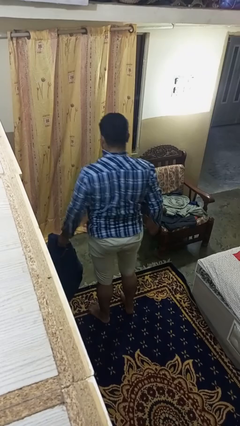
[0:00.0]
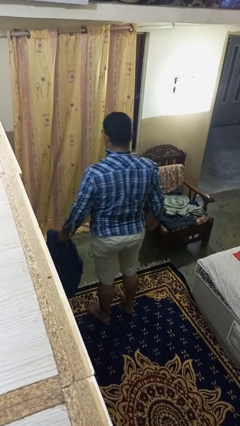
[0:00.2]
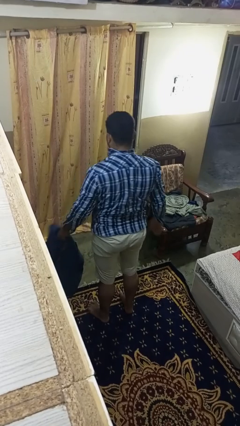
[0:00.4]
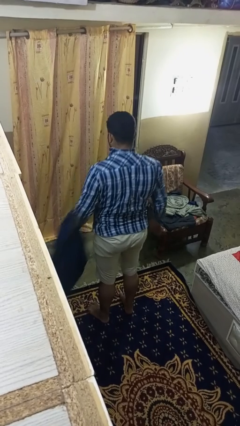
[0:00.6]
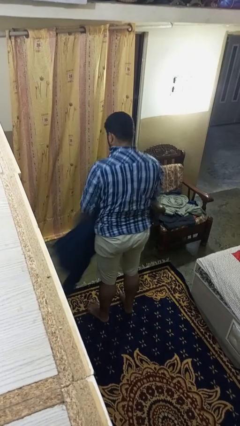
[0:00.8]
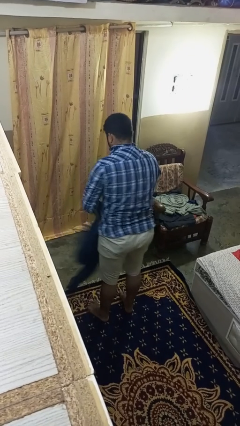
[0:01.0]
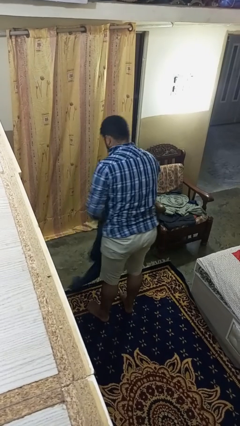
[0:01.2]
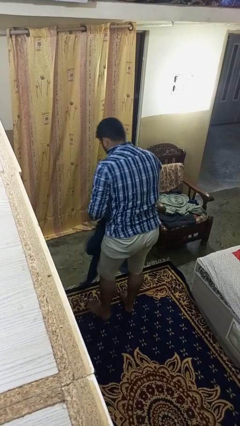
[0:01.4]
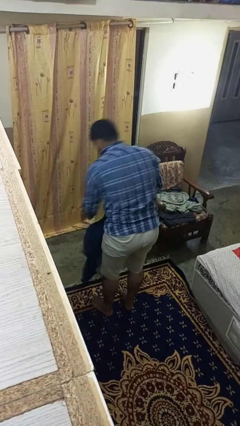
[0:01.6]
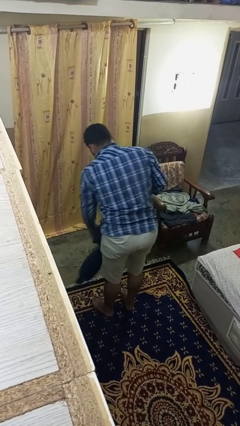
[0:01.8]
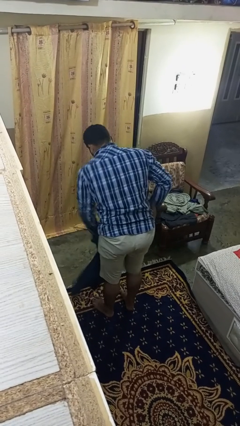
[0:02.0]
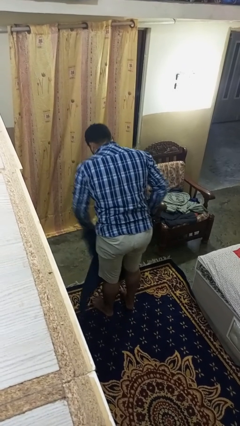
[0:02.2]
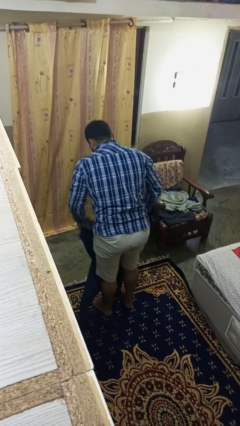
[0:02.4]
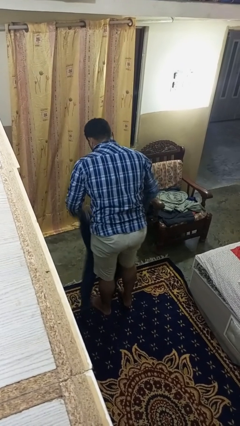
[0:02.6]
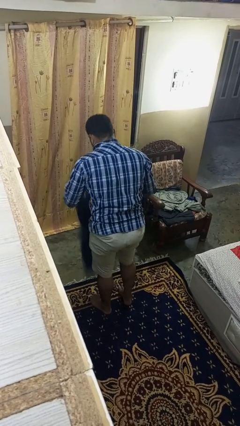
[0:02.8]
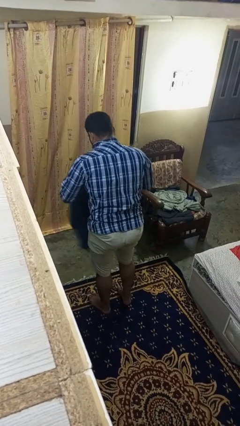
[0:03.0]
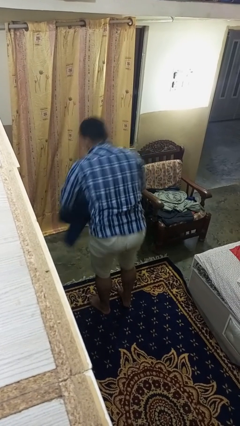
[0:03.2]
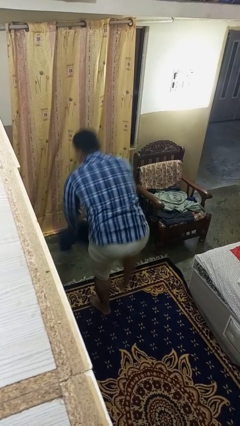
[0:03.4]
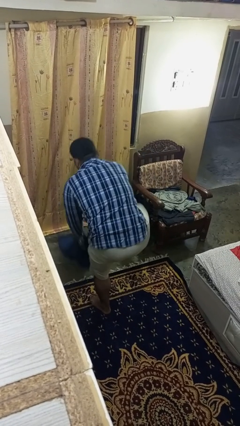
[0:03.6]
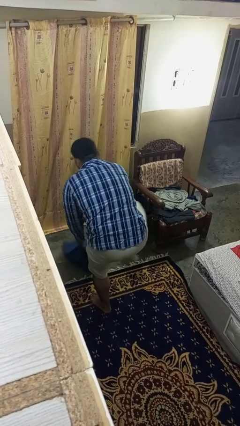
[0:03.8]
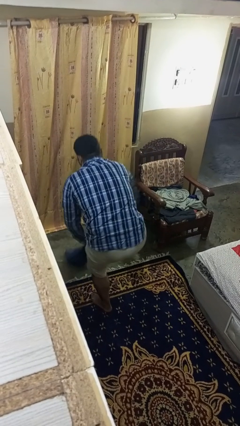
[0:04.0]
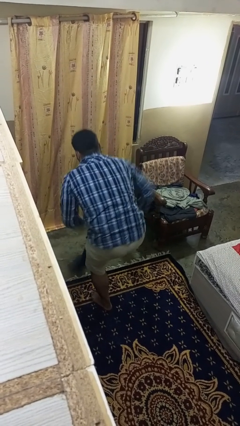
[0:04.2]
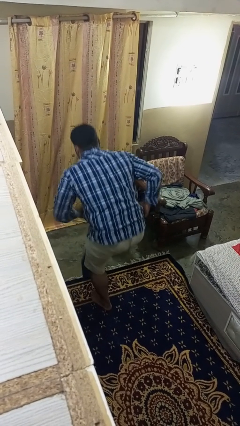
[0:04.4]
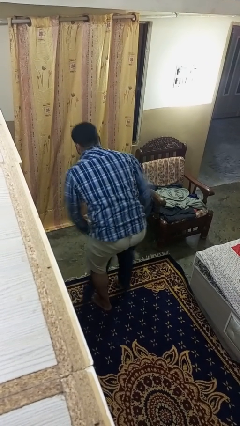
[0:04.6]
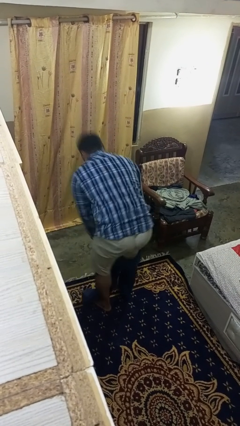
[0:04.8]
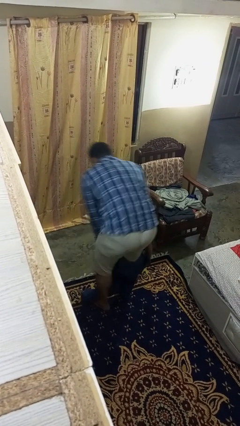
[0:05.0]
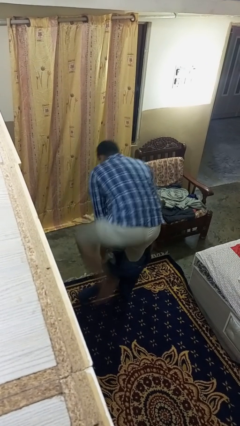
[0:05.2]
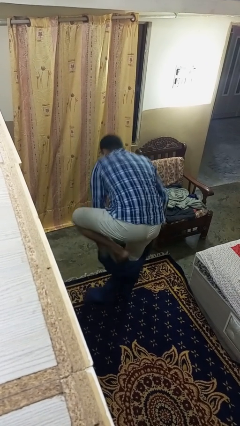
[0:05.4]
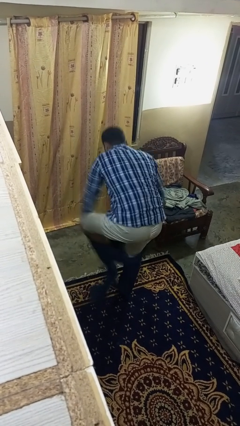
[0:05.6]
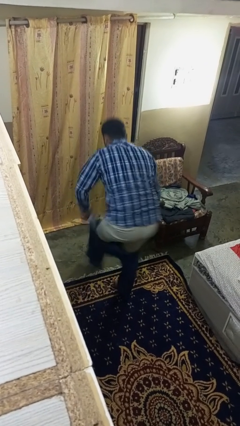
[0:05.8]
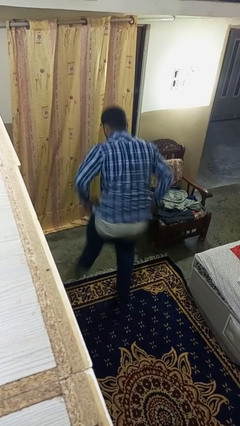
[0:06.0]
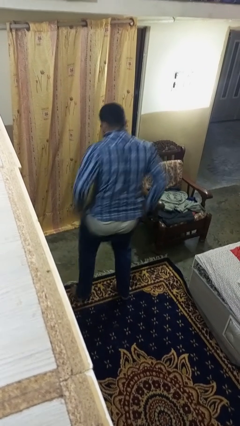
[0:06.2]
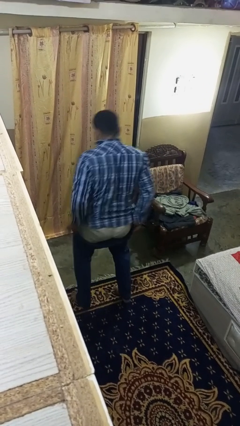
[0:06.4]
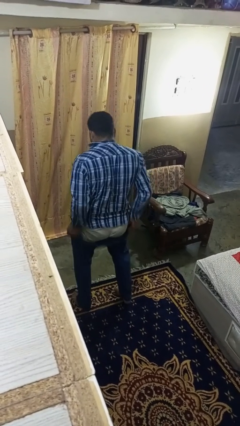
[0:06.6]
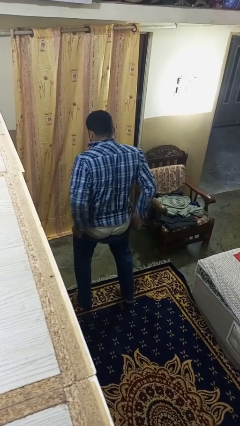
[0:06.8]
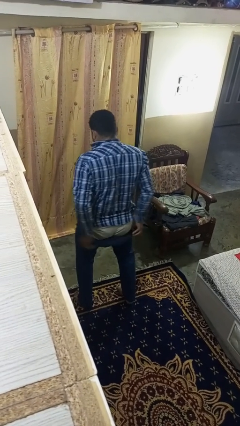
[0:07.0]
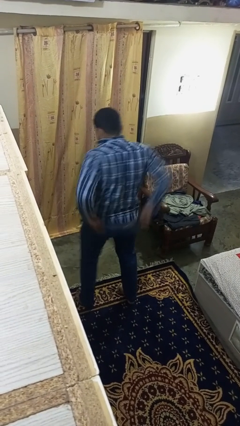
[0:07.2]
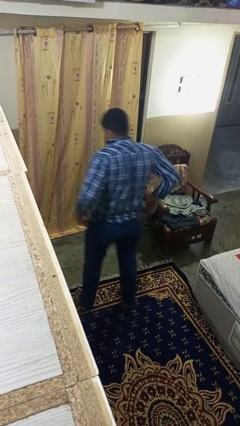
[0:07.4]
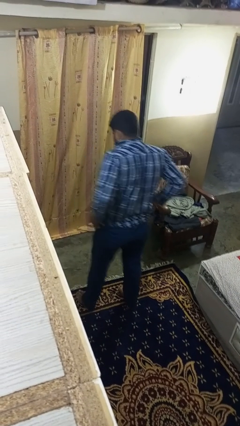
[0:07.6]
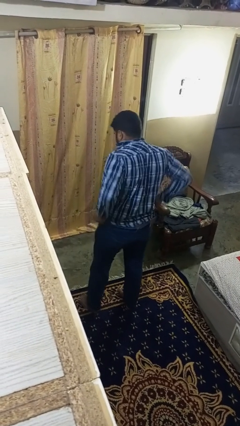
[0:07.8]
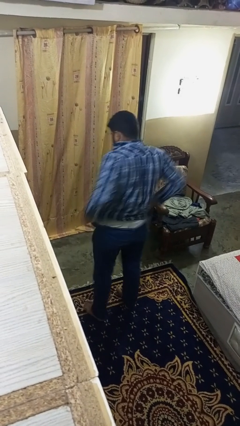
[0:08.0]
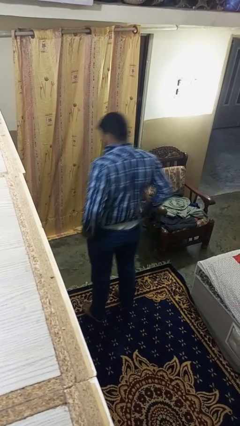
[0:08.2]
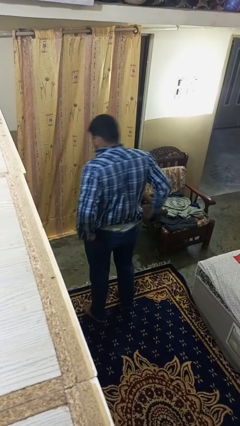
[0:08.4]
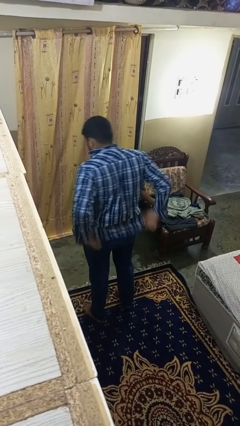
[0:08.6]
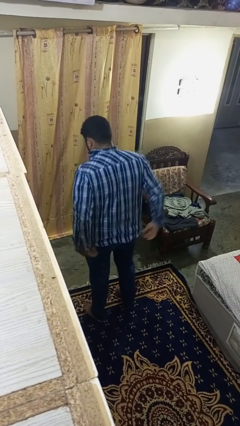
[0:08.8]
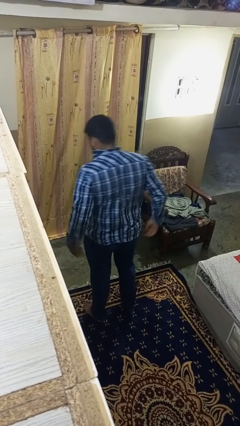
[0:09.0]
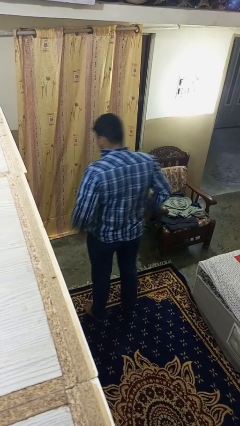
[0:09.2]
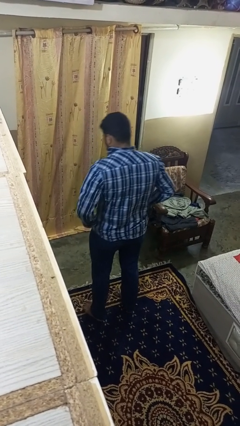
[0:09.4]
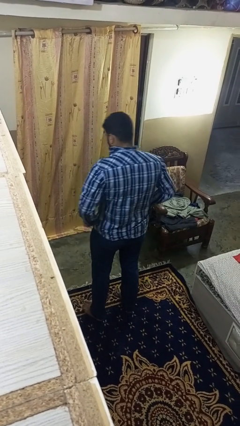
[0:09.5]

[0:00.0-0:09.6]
person puts on pants

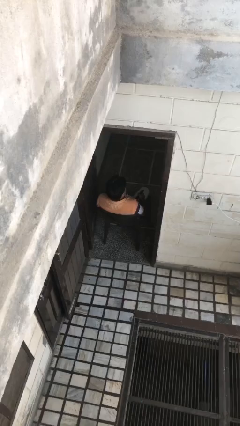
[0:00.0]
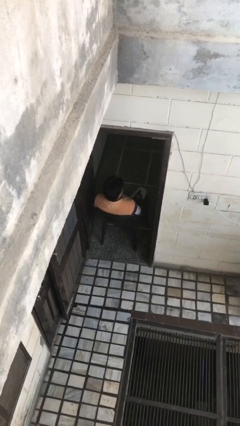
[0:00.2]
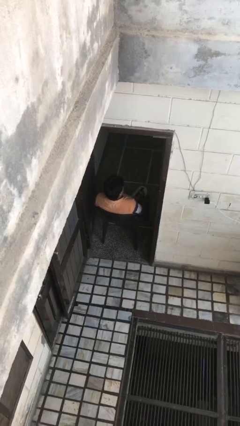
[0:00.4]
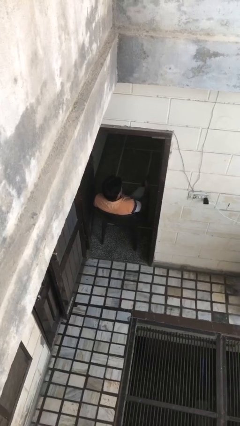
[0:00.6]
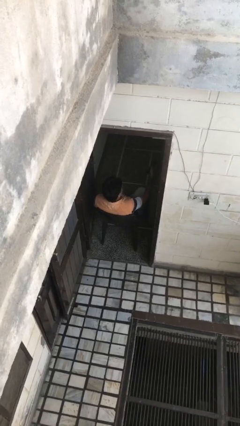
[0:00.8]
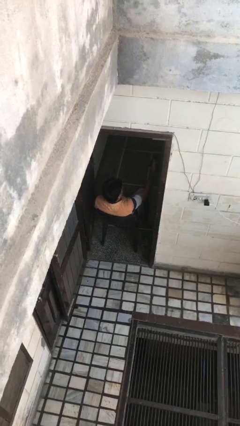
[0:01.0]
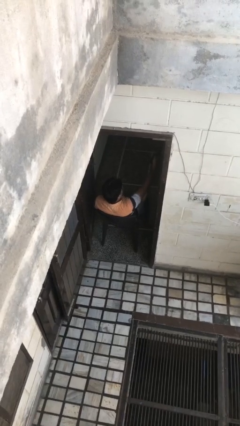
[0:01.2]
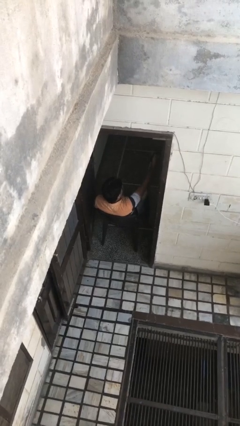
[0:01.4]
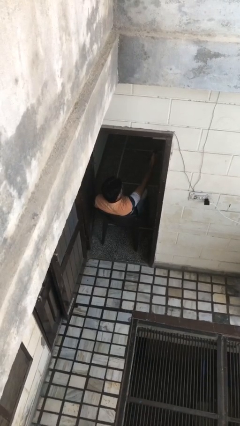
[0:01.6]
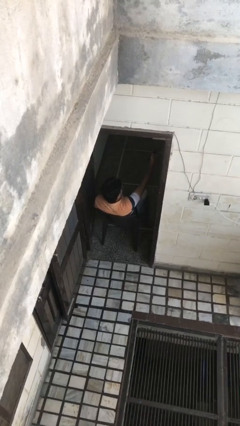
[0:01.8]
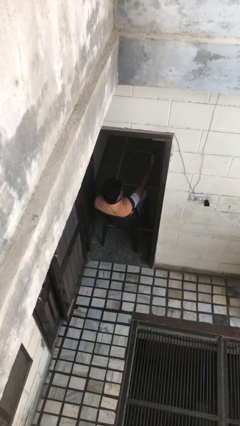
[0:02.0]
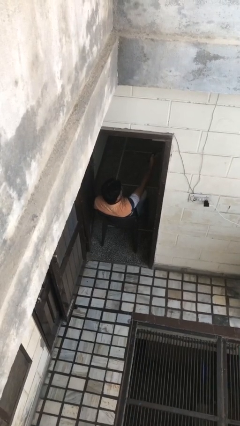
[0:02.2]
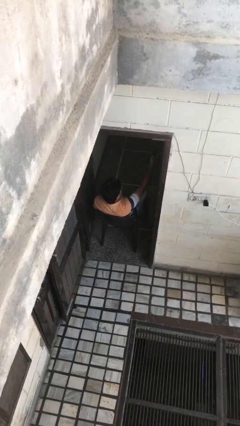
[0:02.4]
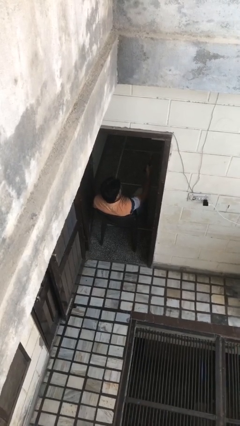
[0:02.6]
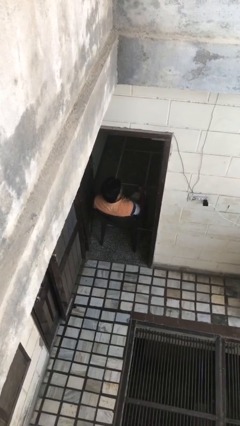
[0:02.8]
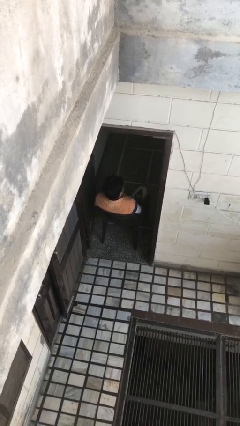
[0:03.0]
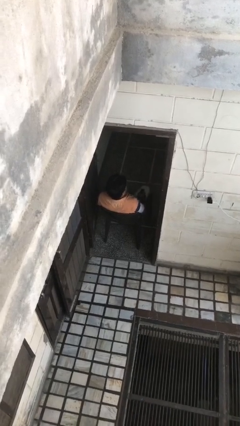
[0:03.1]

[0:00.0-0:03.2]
person uses television remote

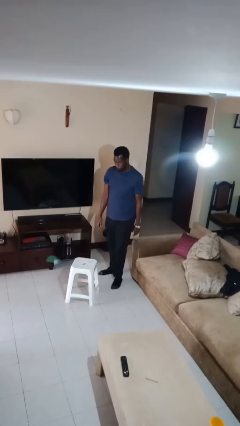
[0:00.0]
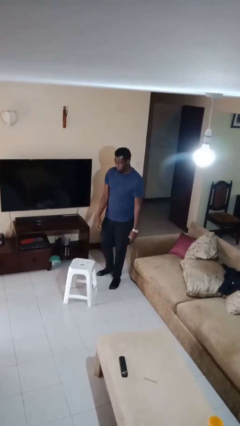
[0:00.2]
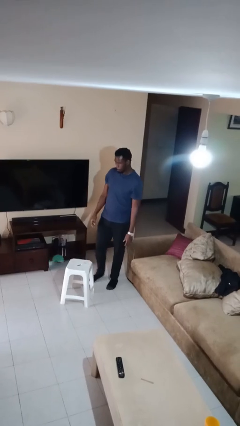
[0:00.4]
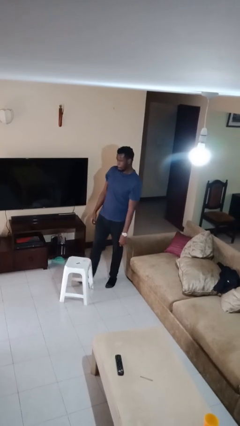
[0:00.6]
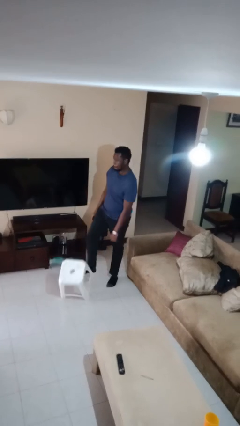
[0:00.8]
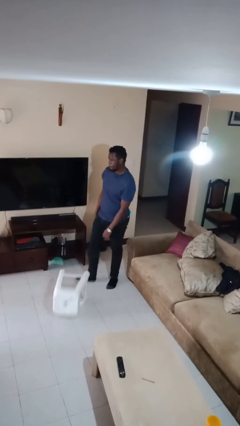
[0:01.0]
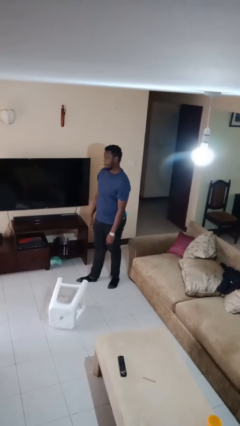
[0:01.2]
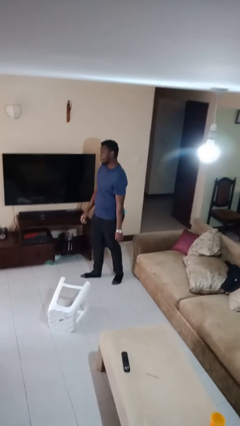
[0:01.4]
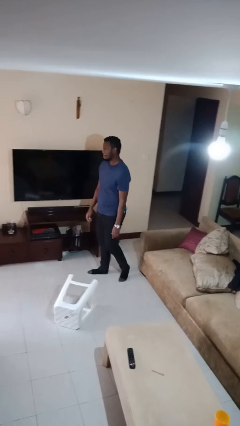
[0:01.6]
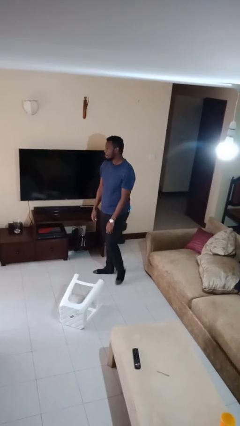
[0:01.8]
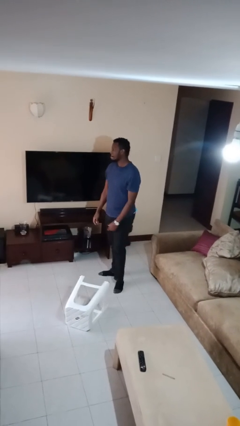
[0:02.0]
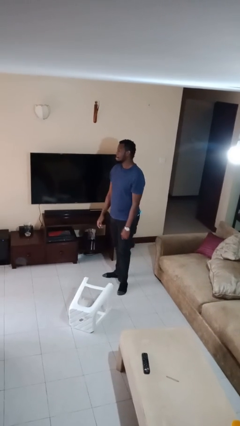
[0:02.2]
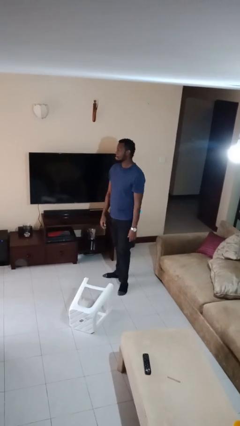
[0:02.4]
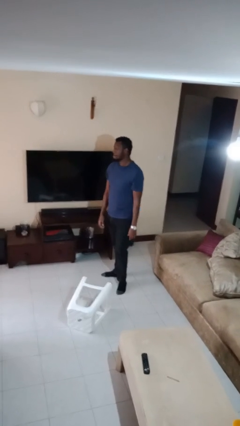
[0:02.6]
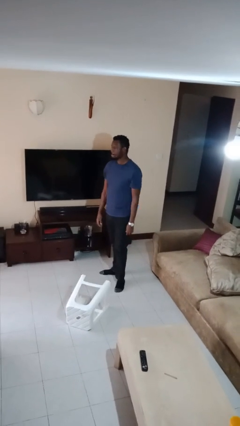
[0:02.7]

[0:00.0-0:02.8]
person knocks over furniture

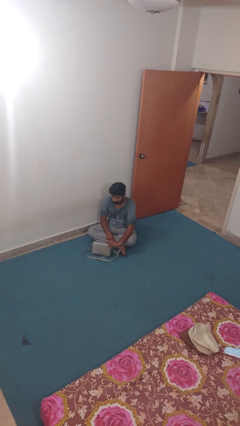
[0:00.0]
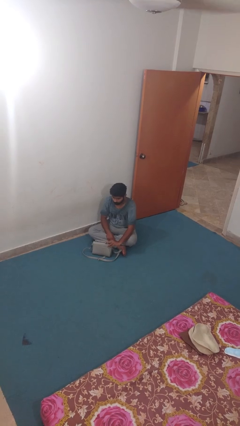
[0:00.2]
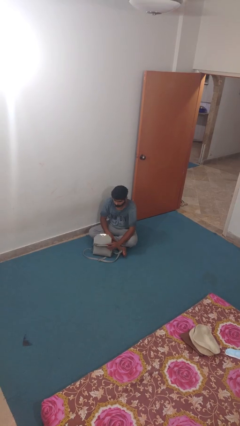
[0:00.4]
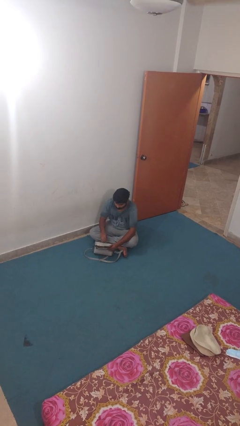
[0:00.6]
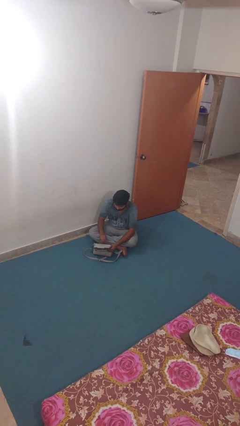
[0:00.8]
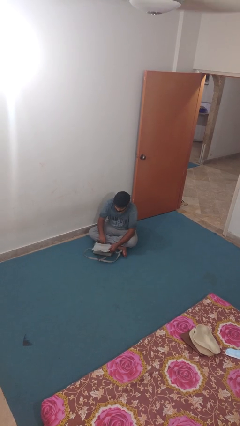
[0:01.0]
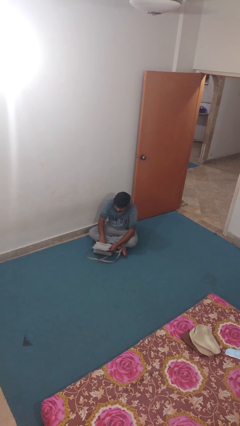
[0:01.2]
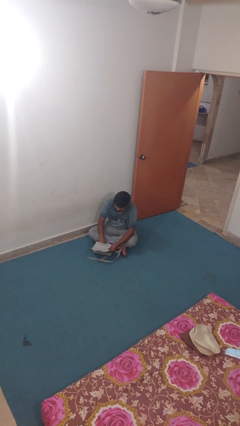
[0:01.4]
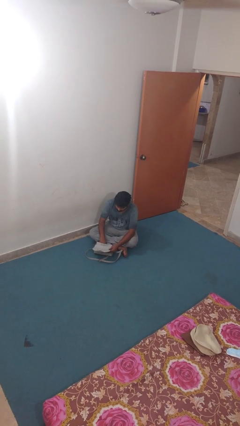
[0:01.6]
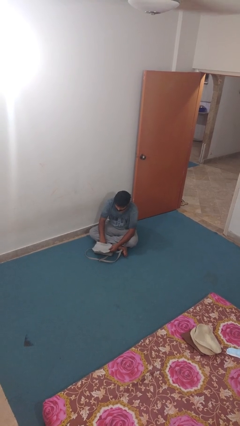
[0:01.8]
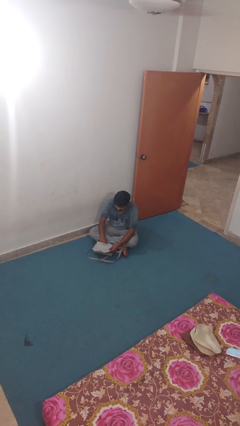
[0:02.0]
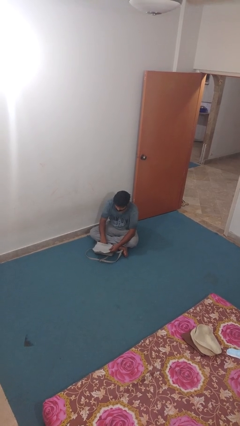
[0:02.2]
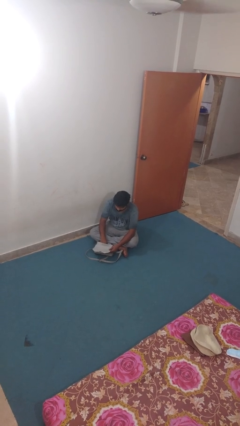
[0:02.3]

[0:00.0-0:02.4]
person searches in purse
